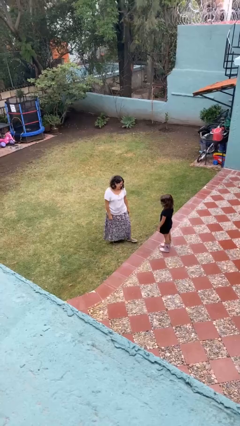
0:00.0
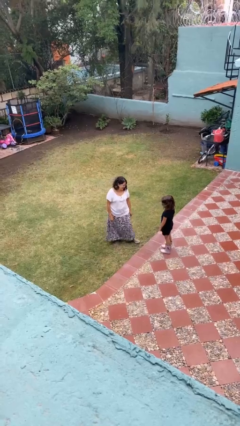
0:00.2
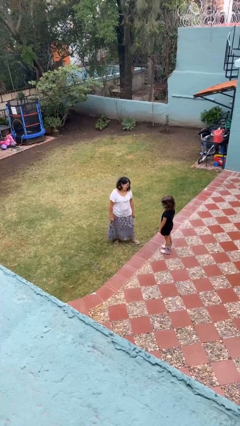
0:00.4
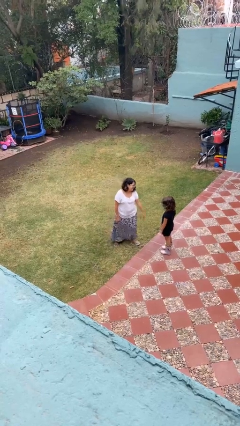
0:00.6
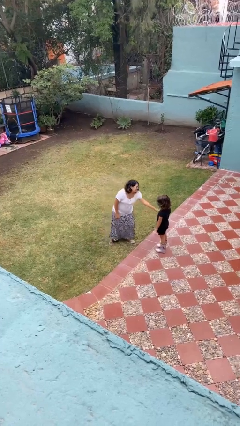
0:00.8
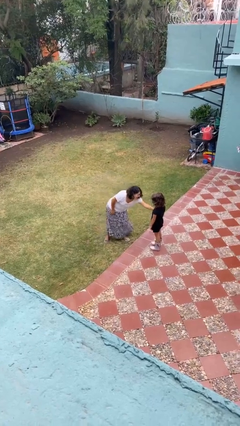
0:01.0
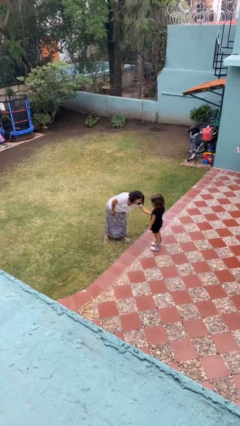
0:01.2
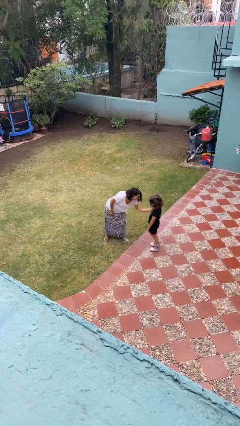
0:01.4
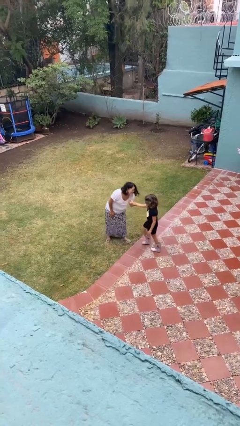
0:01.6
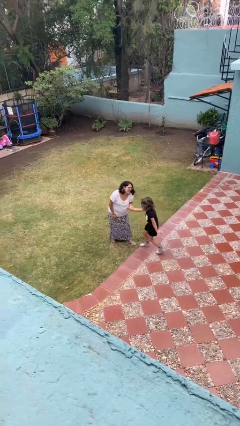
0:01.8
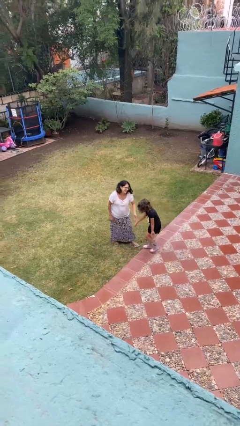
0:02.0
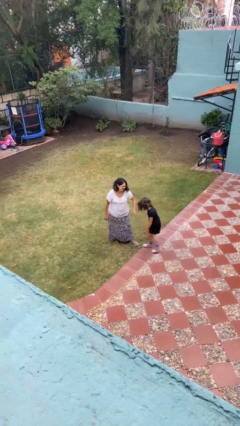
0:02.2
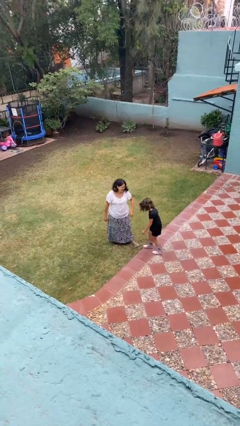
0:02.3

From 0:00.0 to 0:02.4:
person grabs person by forearm

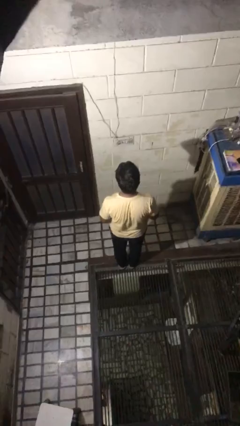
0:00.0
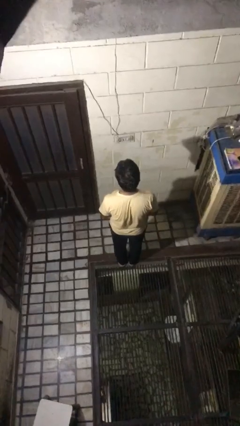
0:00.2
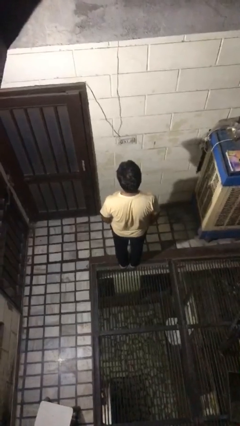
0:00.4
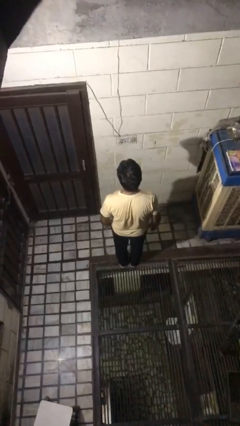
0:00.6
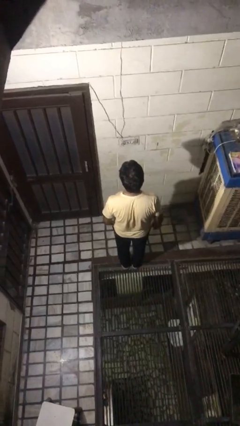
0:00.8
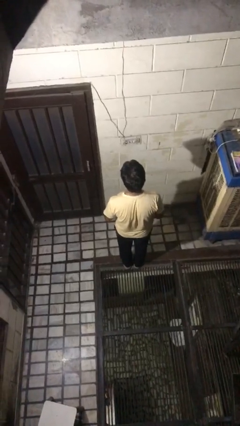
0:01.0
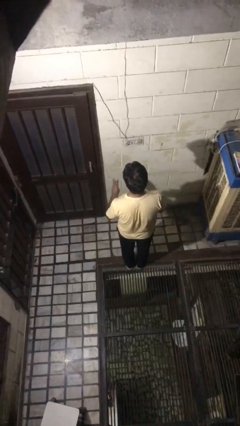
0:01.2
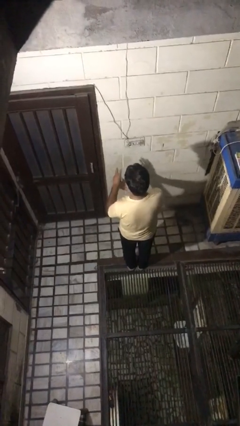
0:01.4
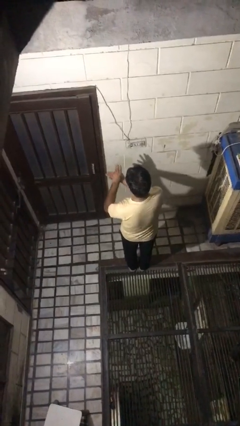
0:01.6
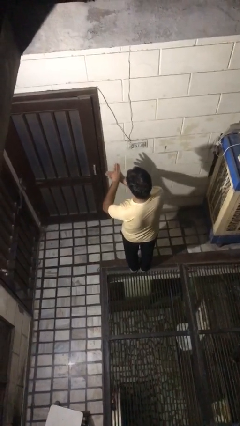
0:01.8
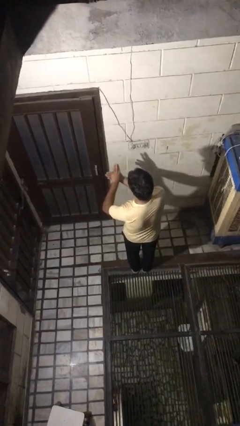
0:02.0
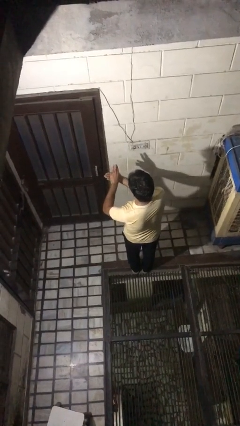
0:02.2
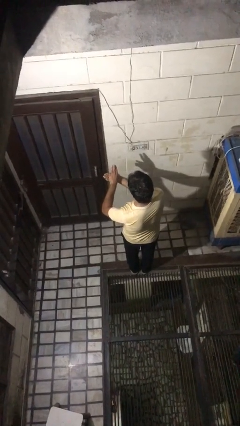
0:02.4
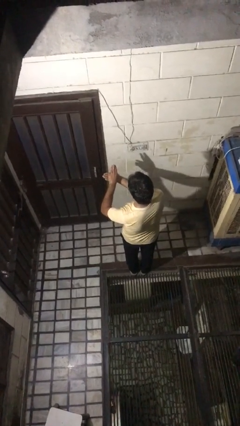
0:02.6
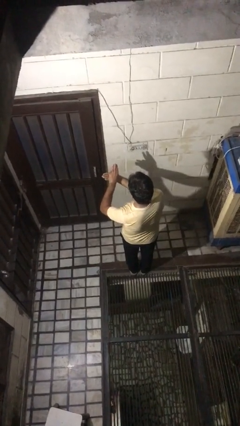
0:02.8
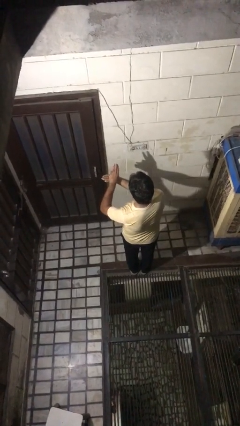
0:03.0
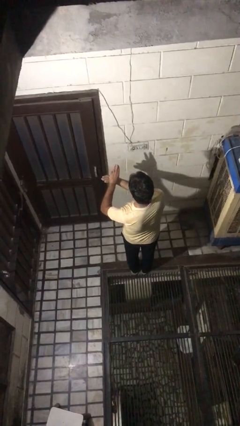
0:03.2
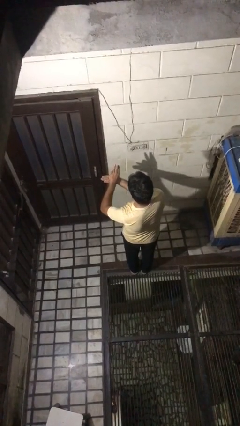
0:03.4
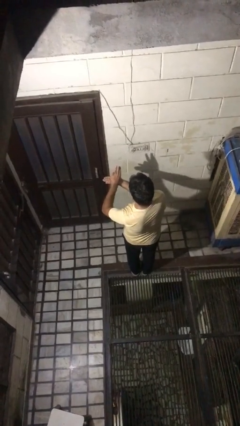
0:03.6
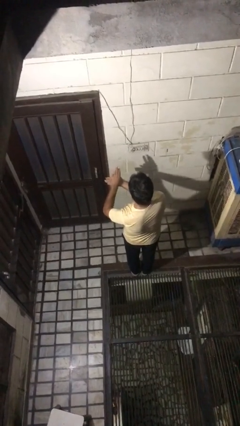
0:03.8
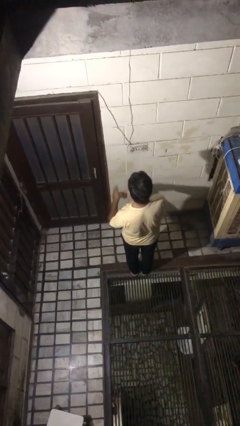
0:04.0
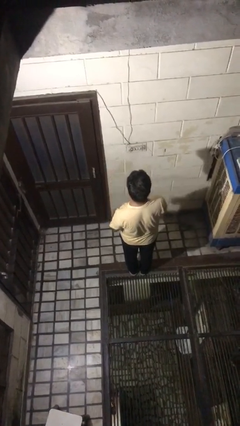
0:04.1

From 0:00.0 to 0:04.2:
person gestures number three

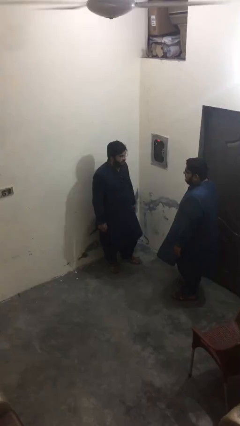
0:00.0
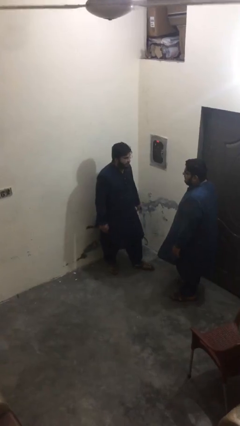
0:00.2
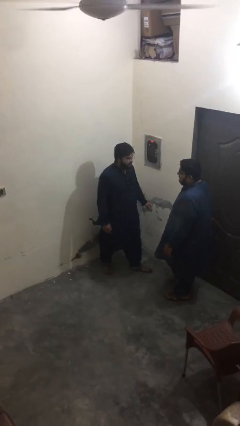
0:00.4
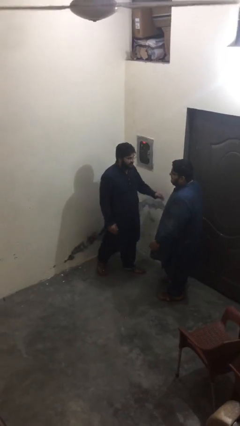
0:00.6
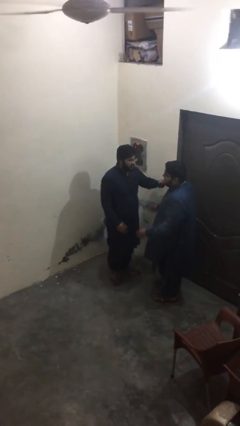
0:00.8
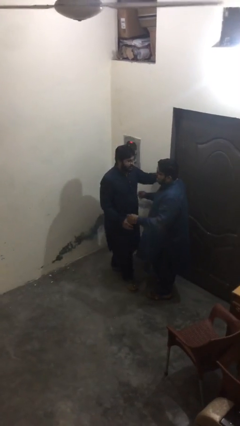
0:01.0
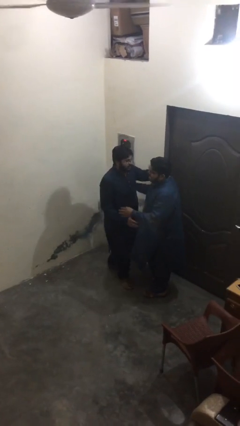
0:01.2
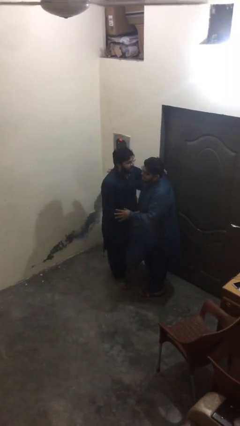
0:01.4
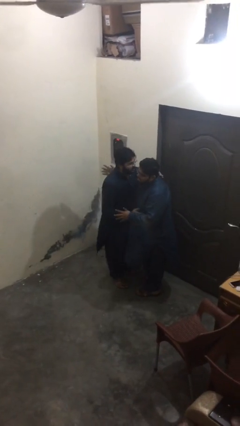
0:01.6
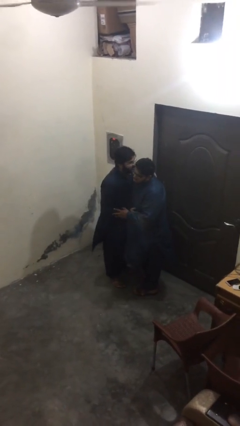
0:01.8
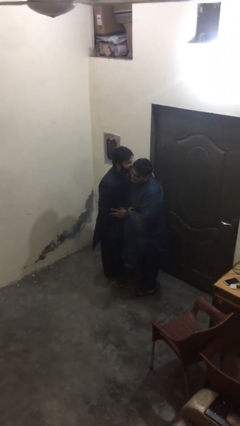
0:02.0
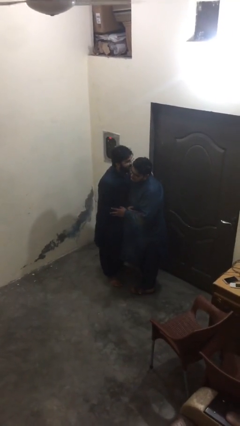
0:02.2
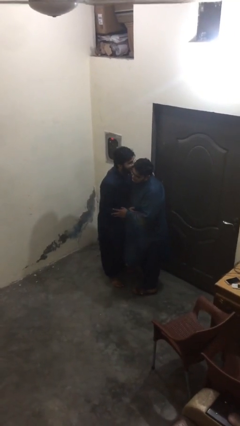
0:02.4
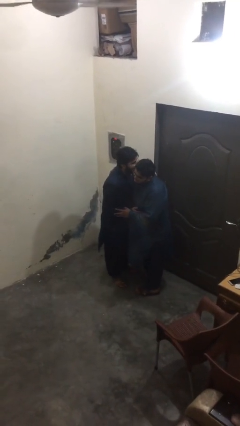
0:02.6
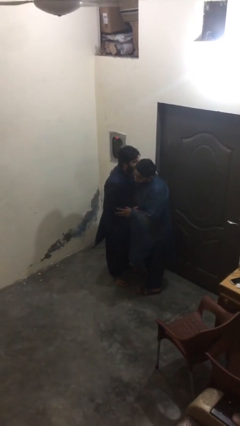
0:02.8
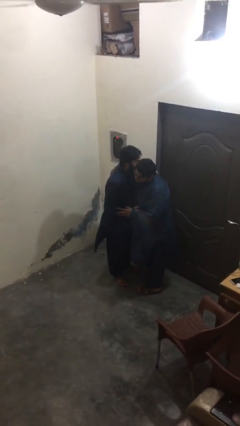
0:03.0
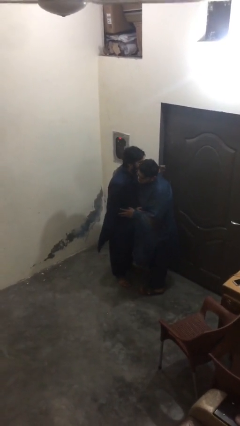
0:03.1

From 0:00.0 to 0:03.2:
person embraces person

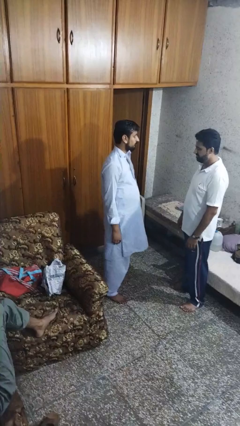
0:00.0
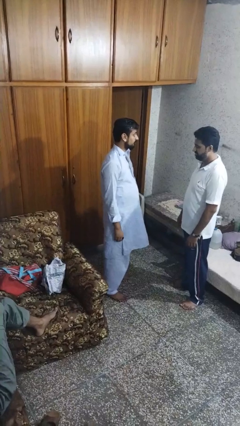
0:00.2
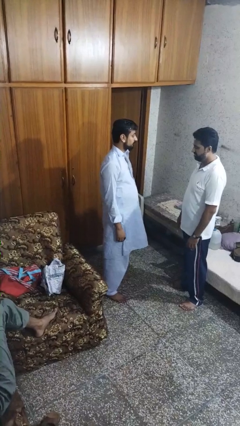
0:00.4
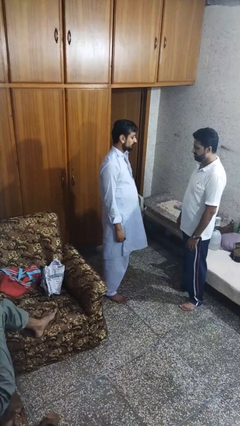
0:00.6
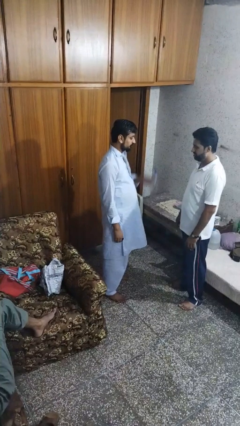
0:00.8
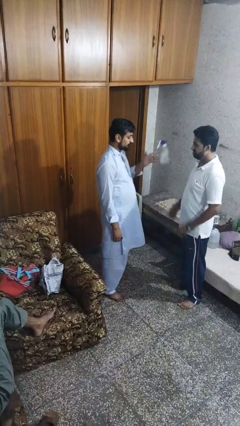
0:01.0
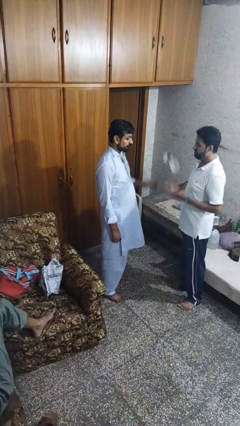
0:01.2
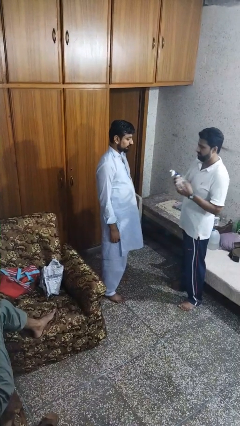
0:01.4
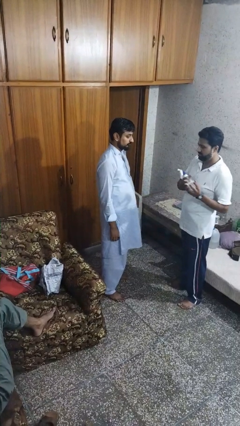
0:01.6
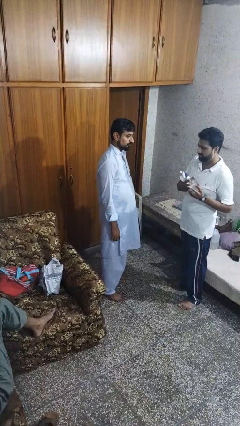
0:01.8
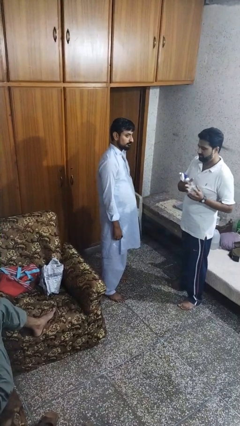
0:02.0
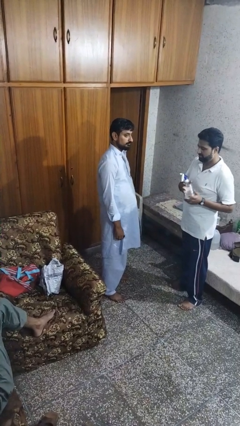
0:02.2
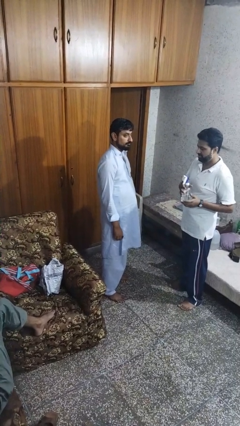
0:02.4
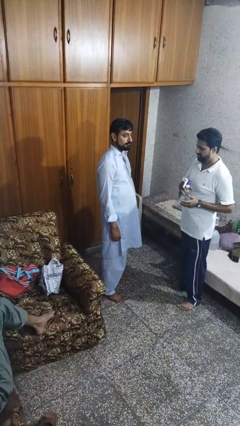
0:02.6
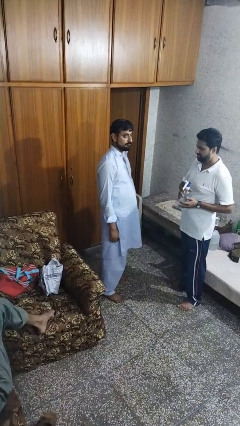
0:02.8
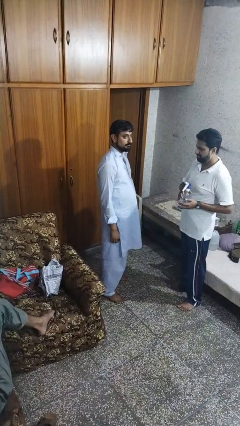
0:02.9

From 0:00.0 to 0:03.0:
person throws object to person

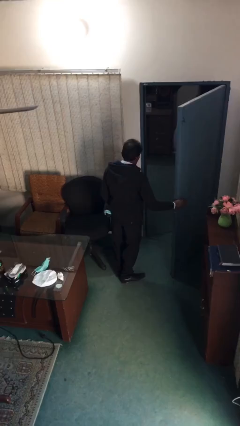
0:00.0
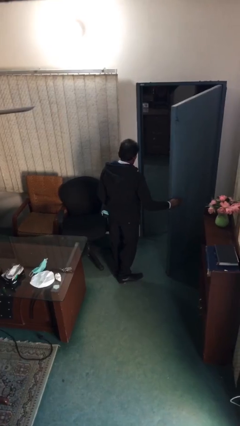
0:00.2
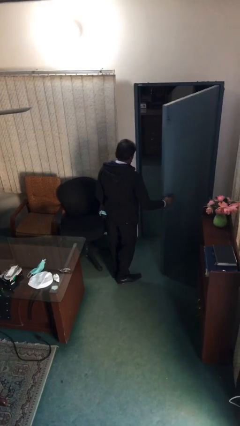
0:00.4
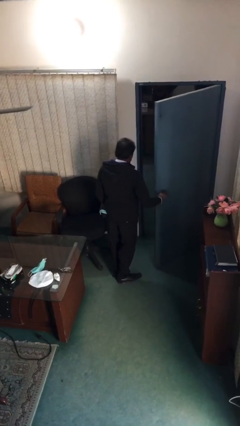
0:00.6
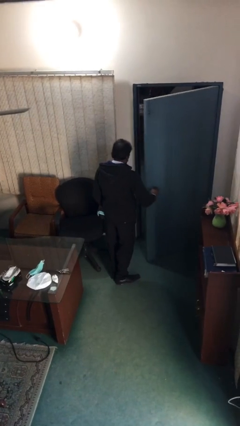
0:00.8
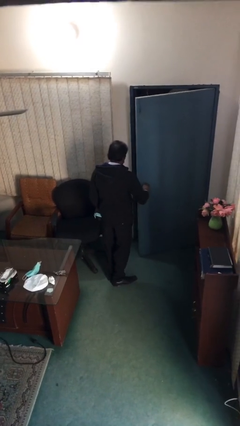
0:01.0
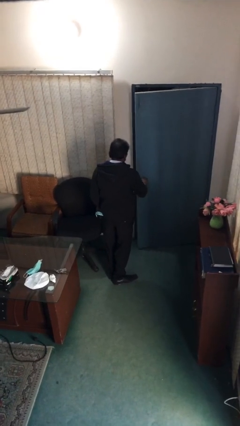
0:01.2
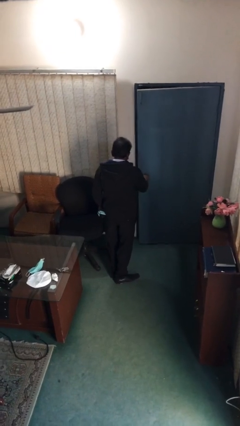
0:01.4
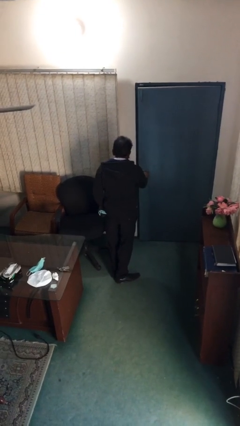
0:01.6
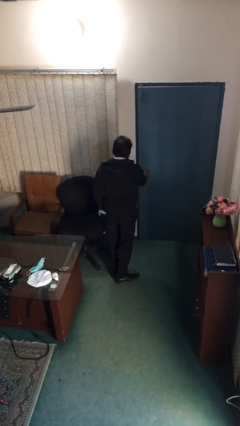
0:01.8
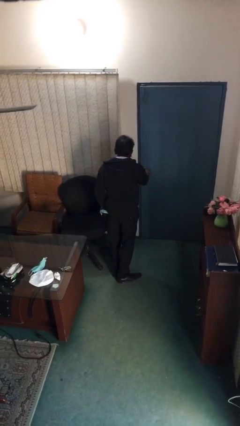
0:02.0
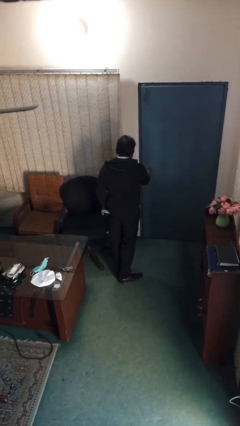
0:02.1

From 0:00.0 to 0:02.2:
person closes facility door

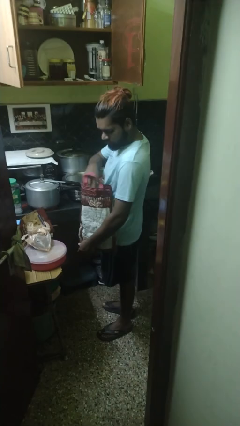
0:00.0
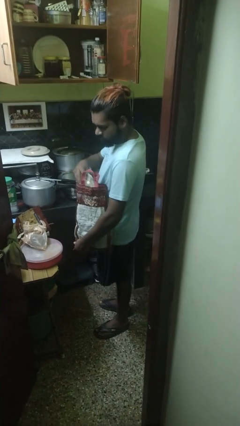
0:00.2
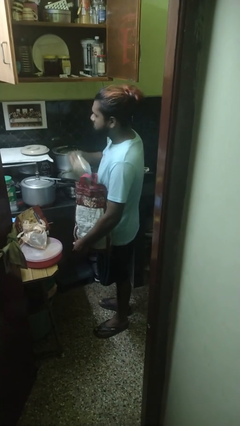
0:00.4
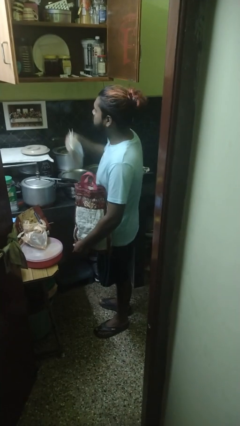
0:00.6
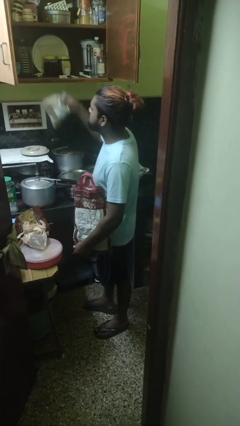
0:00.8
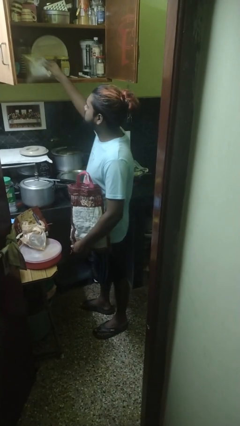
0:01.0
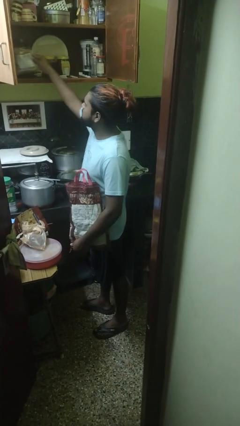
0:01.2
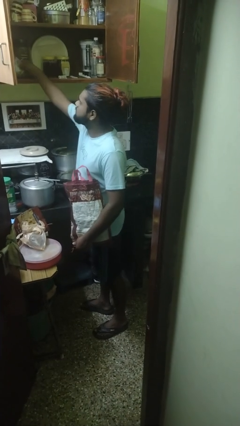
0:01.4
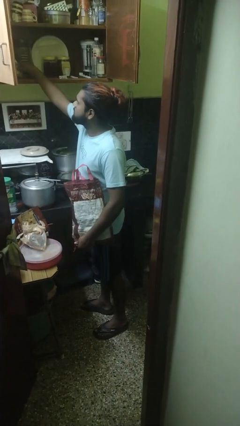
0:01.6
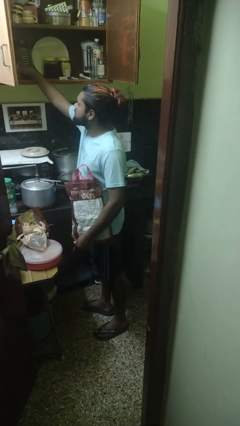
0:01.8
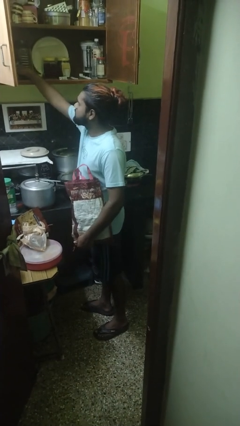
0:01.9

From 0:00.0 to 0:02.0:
person loads groceries into cabinet

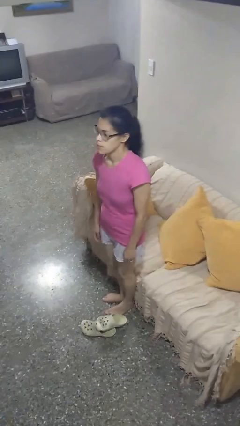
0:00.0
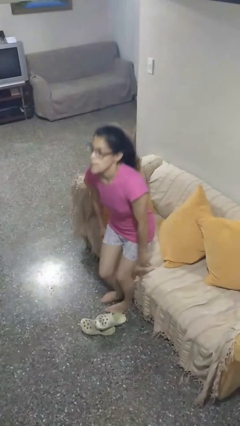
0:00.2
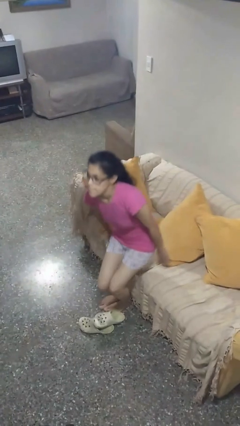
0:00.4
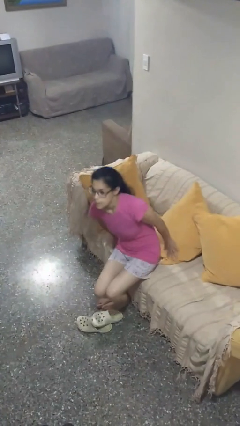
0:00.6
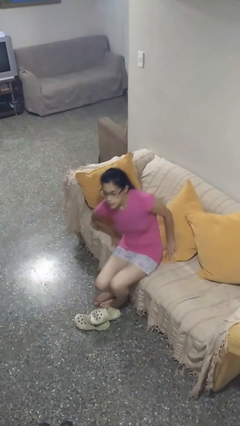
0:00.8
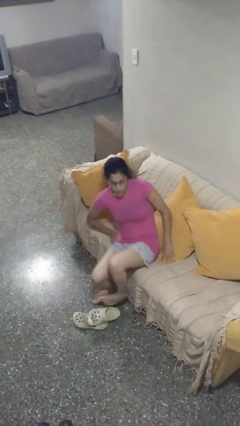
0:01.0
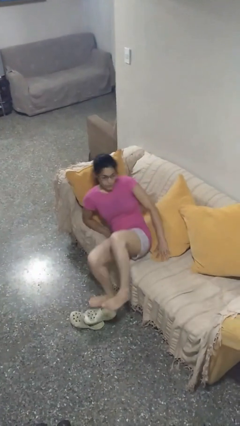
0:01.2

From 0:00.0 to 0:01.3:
person lies down on couch
